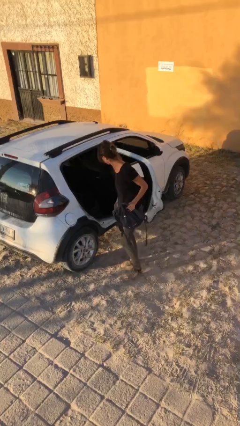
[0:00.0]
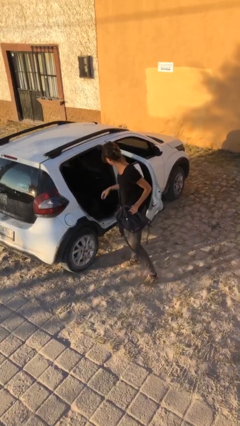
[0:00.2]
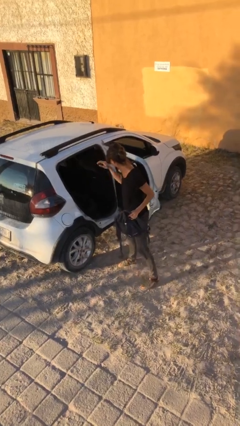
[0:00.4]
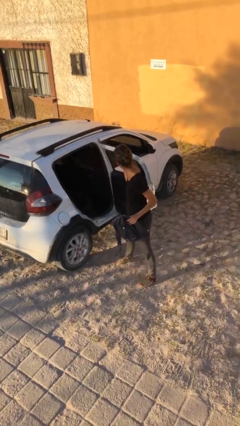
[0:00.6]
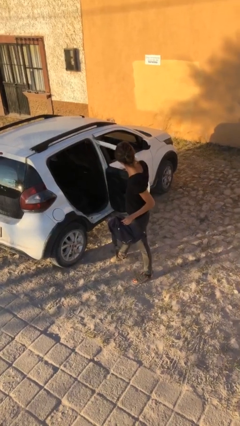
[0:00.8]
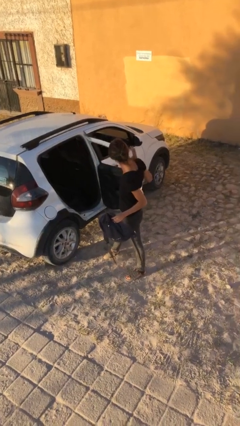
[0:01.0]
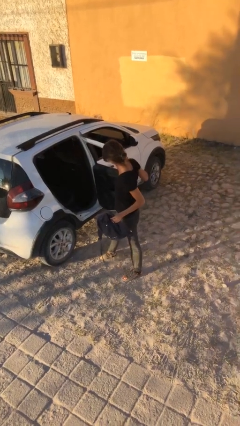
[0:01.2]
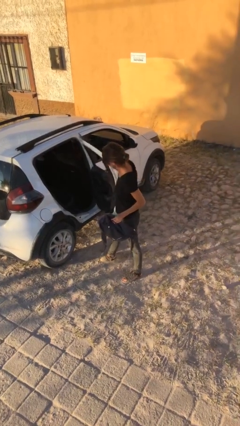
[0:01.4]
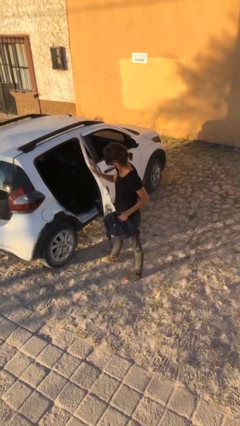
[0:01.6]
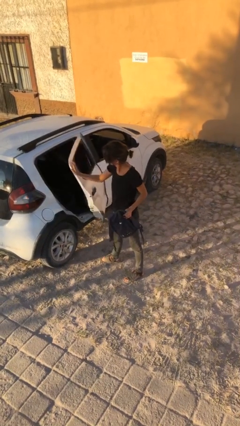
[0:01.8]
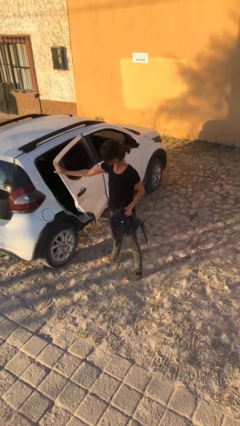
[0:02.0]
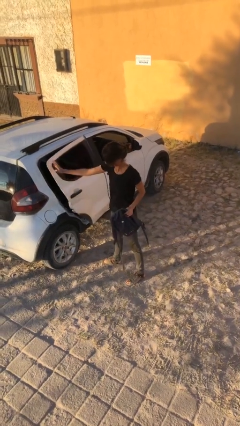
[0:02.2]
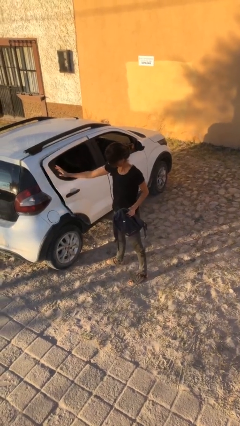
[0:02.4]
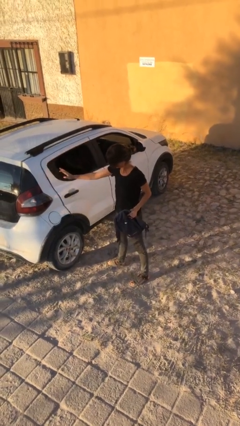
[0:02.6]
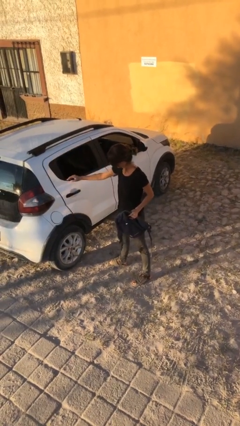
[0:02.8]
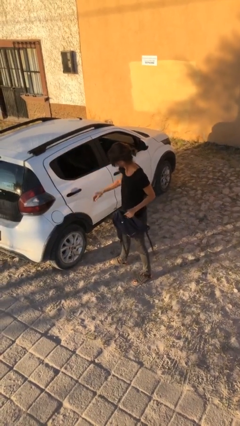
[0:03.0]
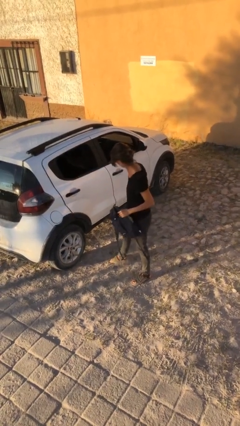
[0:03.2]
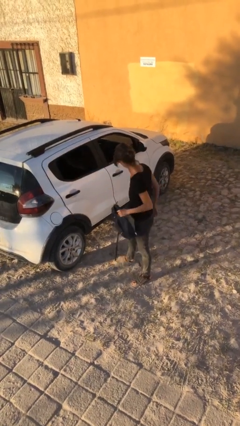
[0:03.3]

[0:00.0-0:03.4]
person closes car door

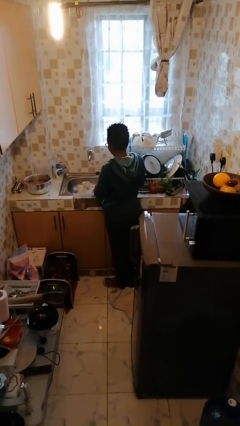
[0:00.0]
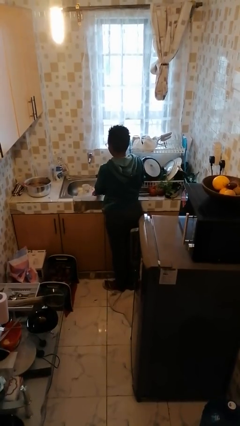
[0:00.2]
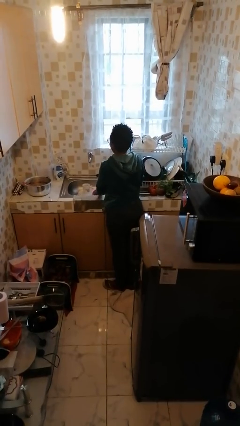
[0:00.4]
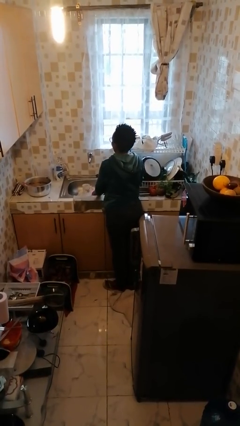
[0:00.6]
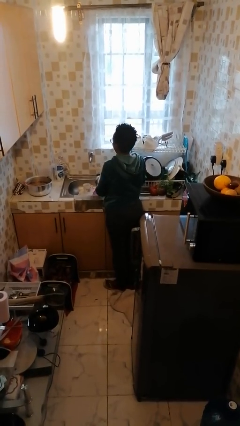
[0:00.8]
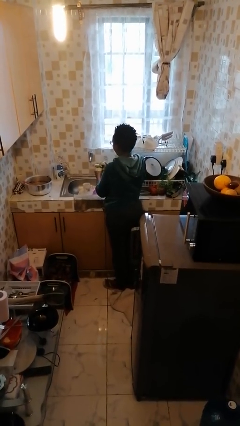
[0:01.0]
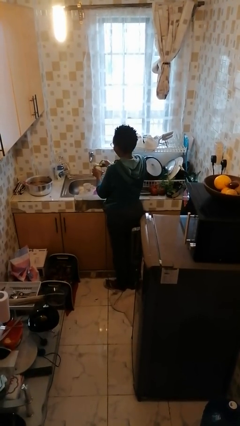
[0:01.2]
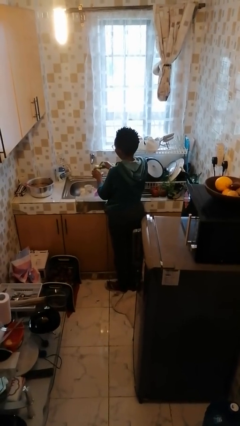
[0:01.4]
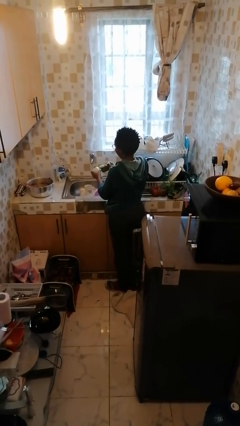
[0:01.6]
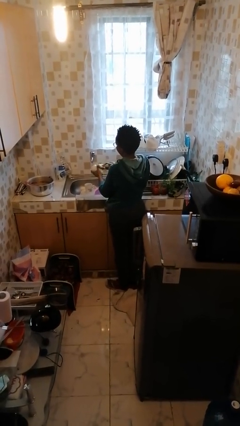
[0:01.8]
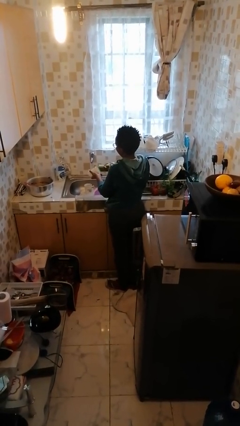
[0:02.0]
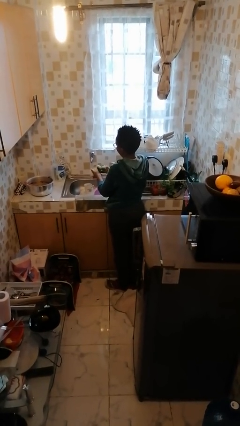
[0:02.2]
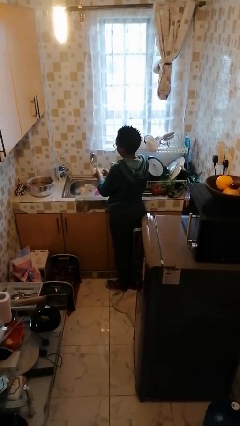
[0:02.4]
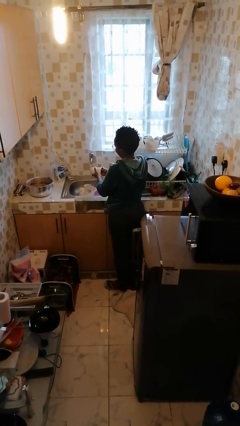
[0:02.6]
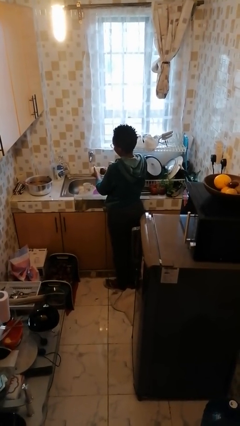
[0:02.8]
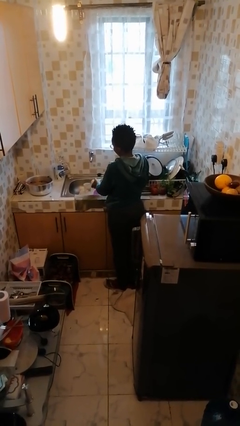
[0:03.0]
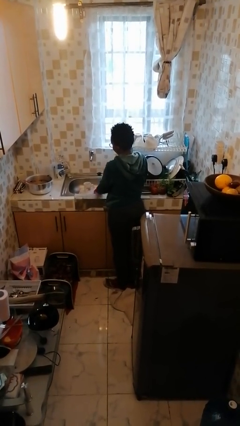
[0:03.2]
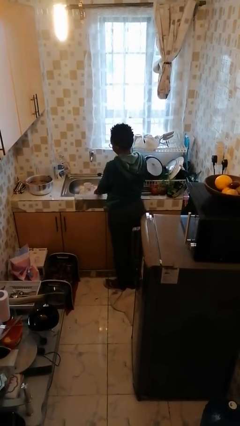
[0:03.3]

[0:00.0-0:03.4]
person washes dish

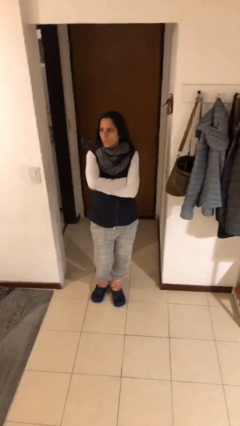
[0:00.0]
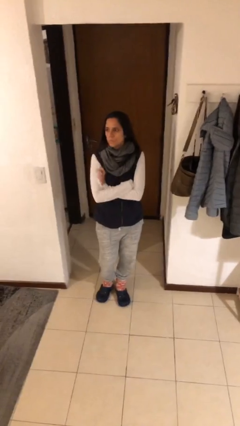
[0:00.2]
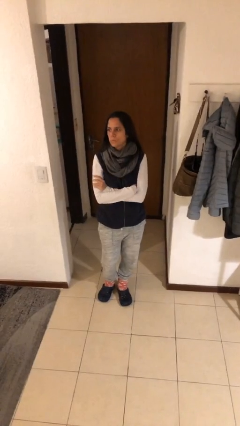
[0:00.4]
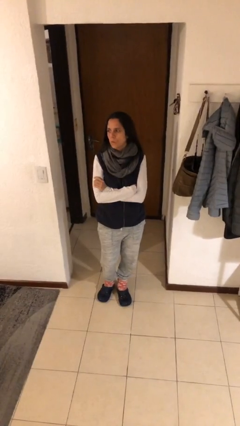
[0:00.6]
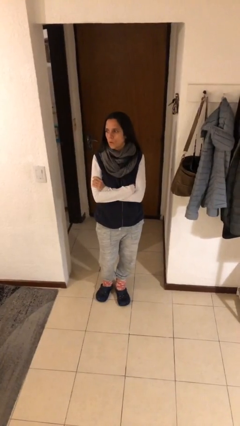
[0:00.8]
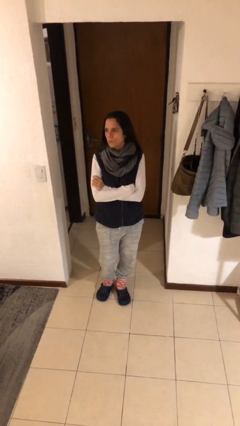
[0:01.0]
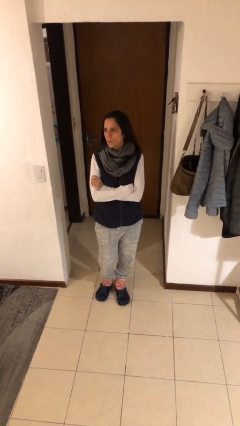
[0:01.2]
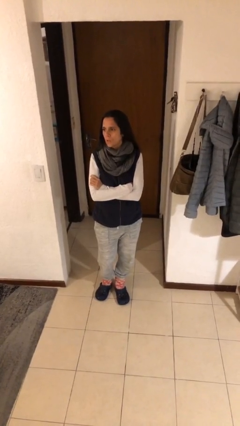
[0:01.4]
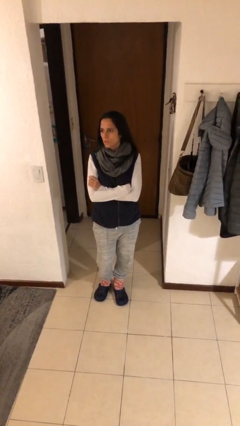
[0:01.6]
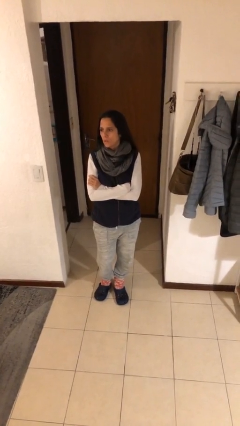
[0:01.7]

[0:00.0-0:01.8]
person crosses arms

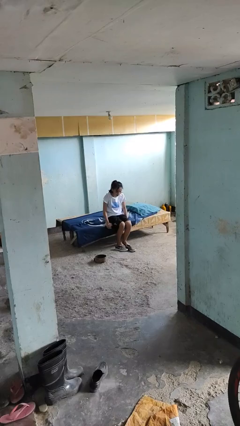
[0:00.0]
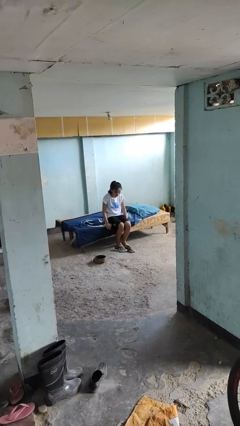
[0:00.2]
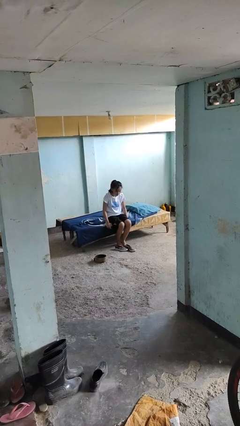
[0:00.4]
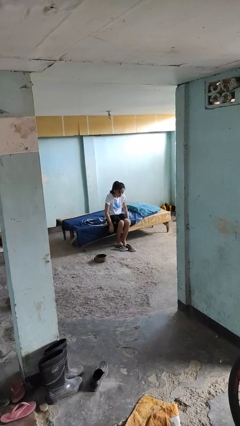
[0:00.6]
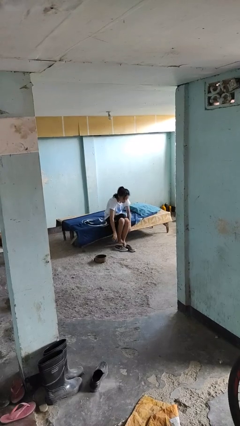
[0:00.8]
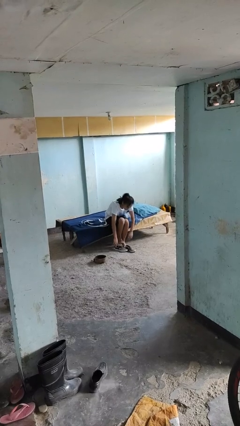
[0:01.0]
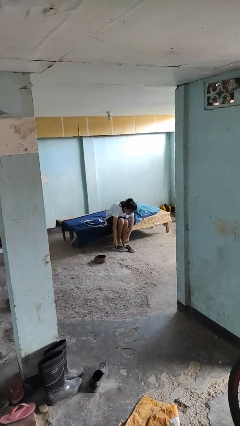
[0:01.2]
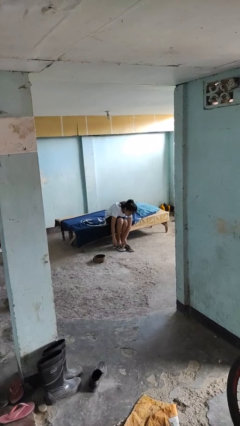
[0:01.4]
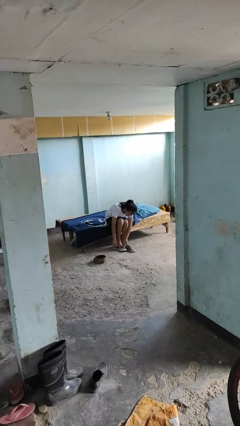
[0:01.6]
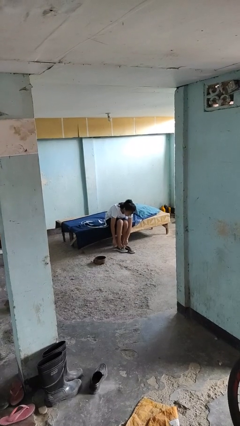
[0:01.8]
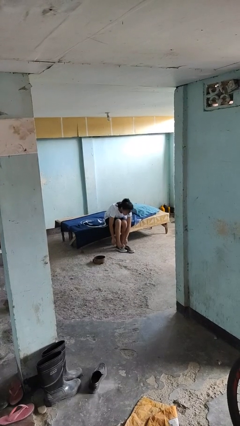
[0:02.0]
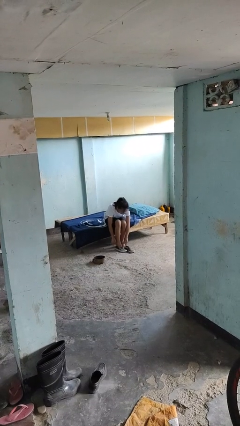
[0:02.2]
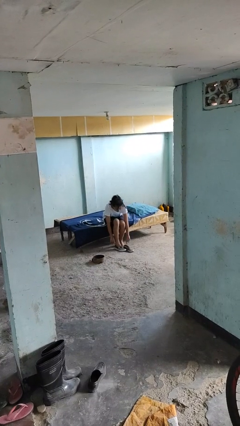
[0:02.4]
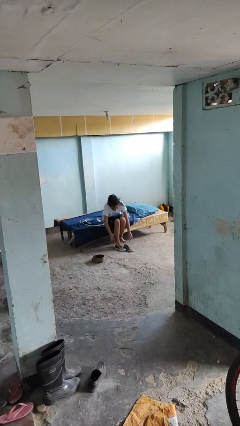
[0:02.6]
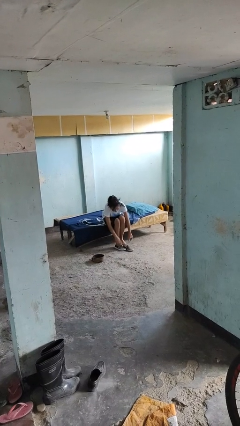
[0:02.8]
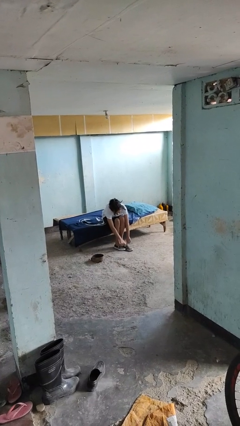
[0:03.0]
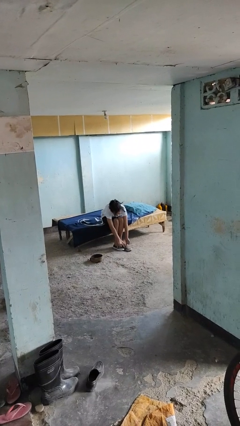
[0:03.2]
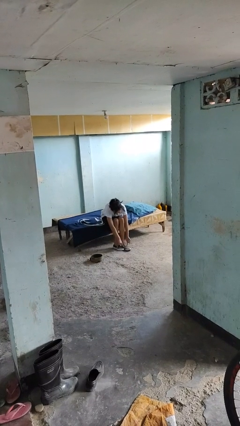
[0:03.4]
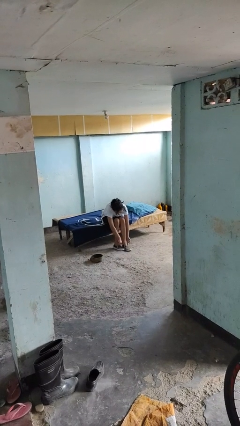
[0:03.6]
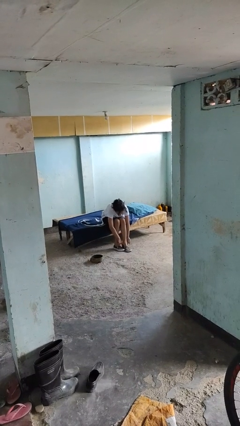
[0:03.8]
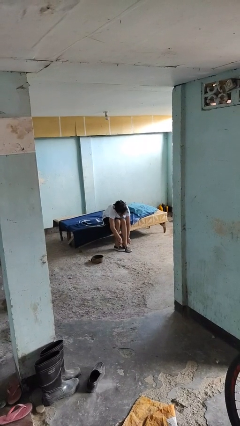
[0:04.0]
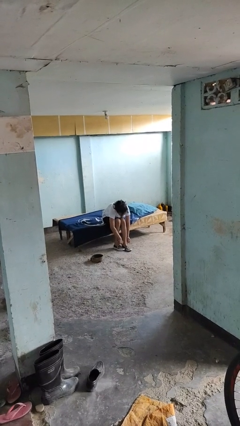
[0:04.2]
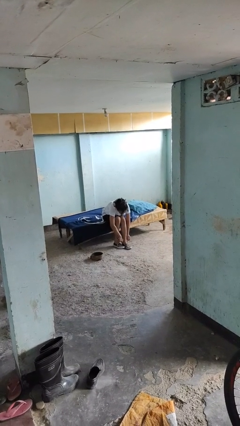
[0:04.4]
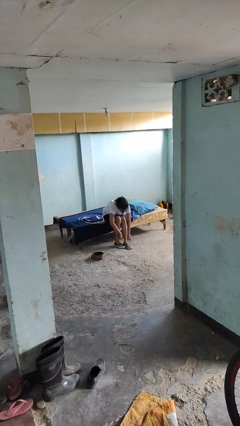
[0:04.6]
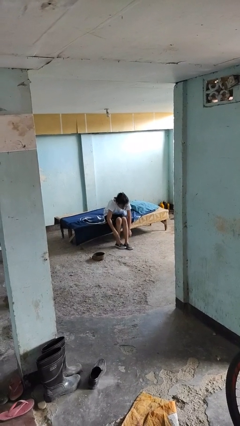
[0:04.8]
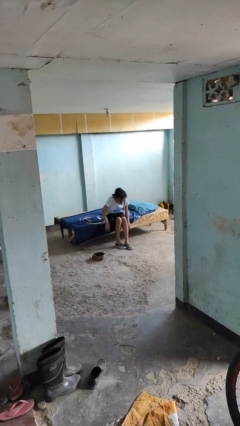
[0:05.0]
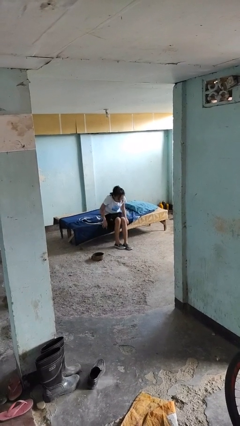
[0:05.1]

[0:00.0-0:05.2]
person puts on shoes

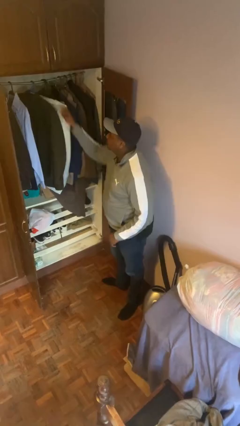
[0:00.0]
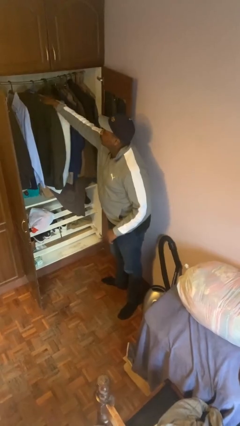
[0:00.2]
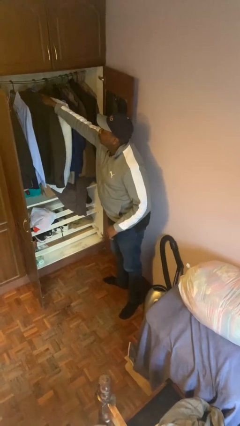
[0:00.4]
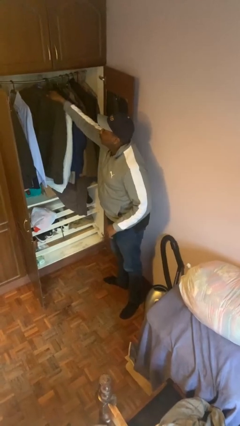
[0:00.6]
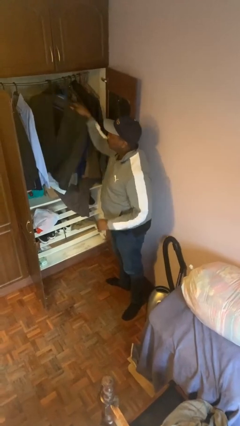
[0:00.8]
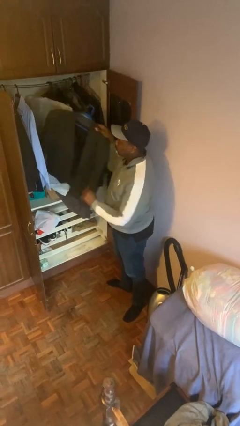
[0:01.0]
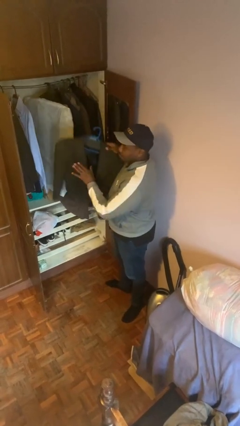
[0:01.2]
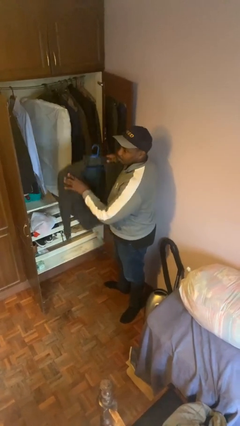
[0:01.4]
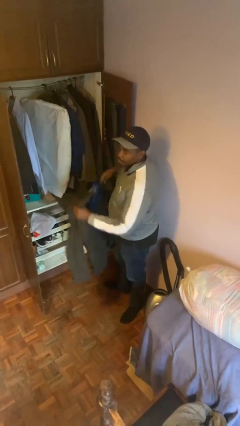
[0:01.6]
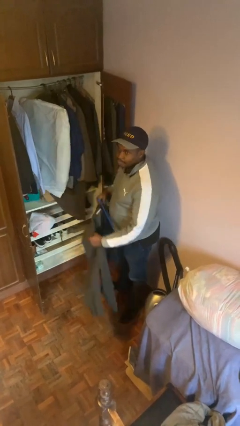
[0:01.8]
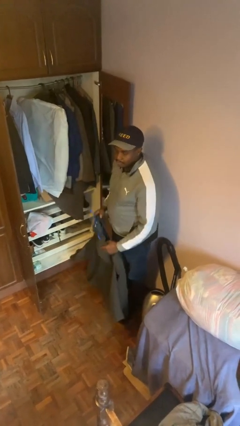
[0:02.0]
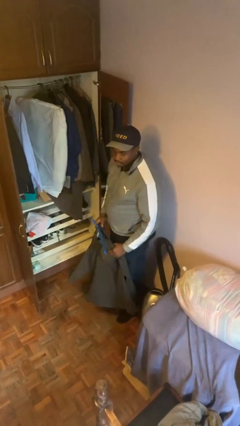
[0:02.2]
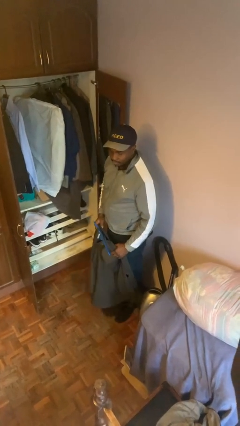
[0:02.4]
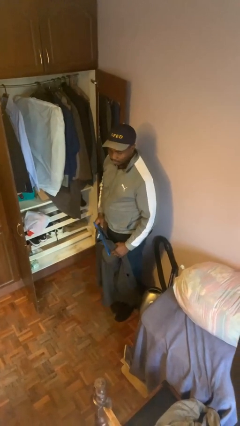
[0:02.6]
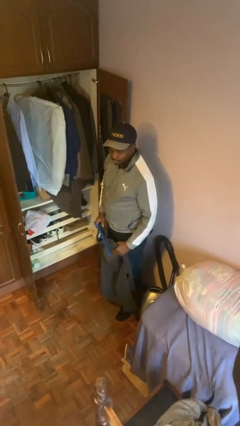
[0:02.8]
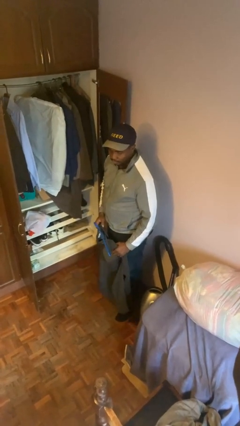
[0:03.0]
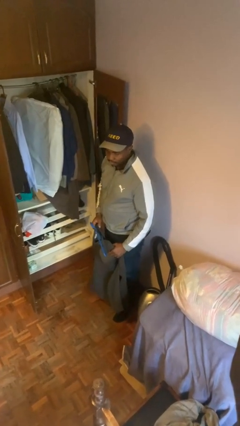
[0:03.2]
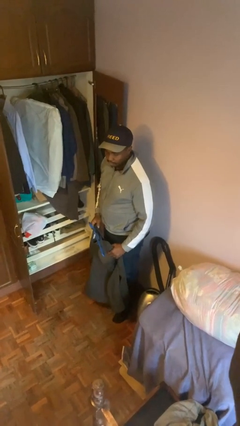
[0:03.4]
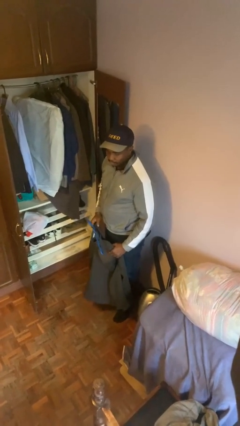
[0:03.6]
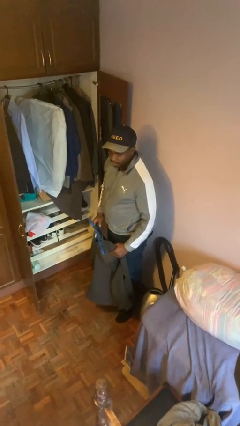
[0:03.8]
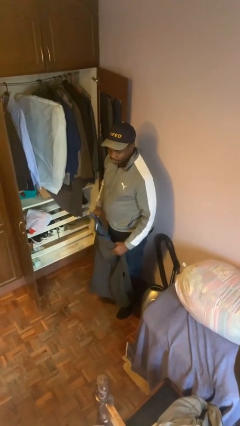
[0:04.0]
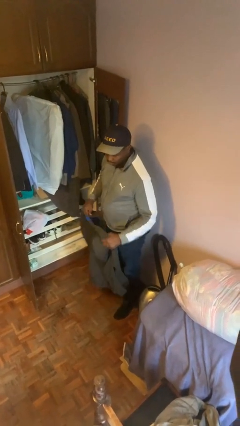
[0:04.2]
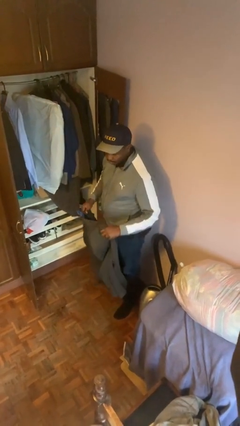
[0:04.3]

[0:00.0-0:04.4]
person takes clothes from closet
